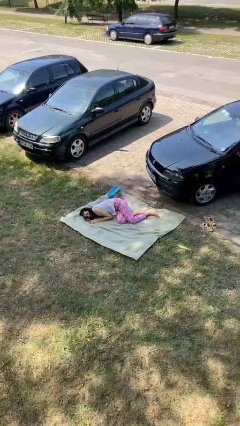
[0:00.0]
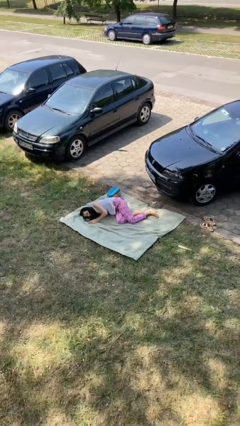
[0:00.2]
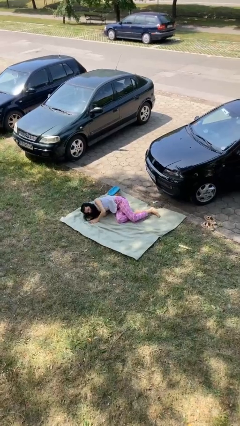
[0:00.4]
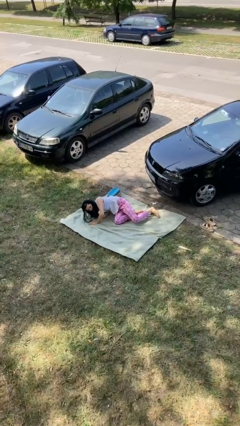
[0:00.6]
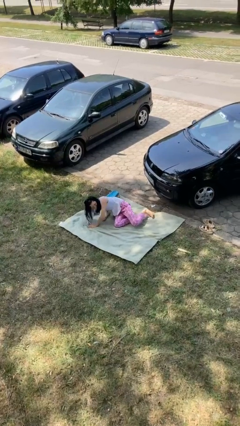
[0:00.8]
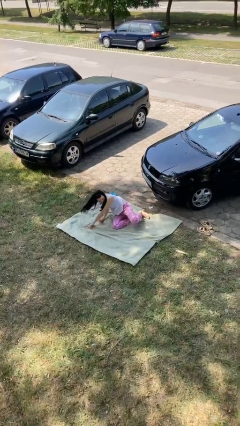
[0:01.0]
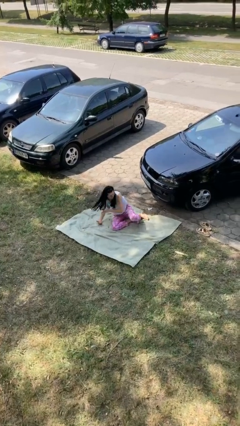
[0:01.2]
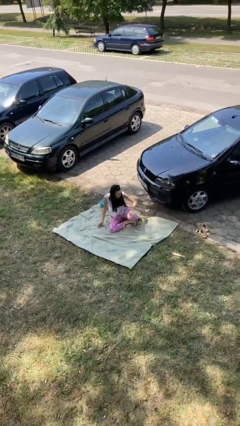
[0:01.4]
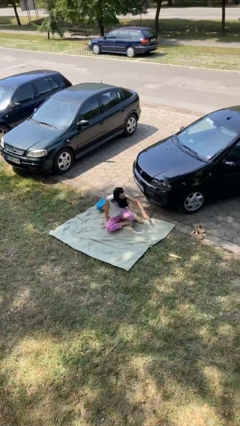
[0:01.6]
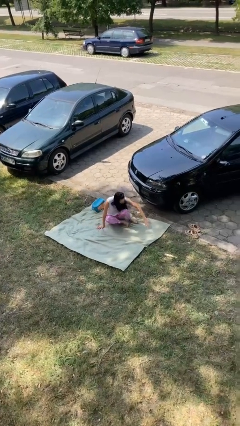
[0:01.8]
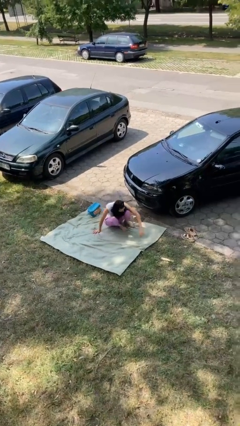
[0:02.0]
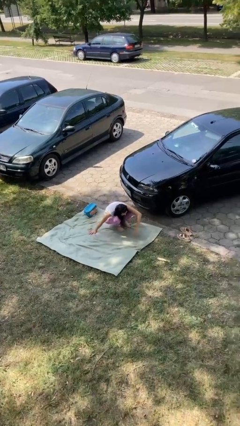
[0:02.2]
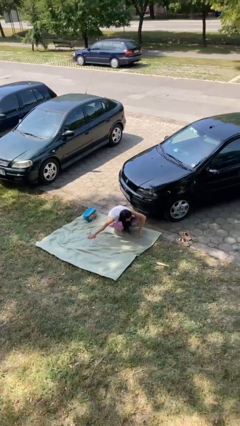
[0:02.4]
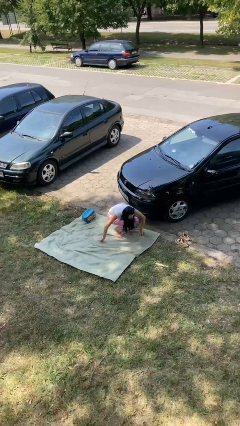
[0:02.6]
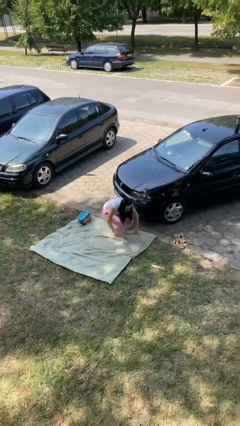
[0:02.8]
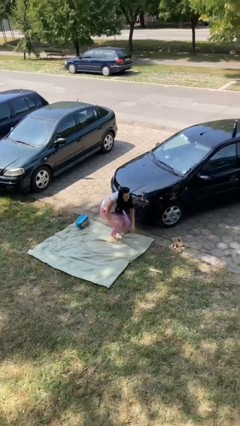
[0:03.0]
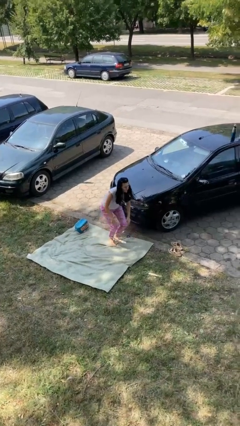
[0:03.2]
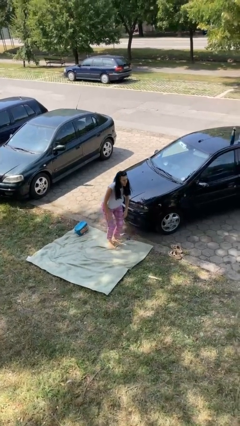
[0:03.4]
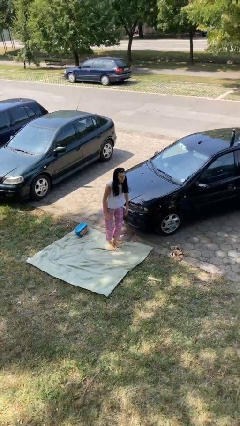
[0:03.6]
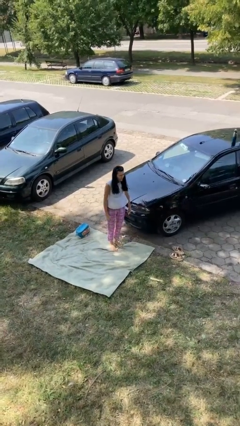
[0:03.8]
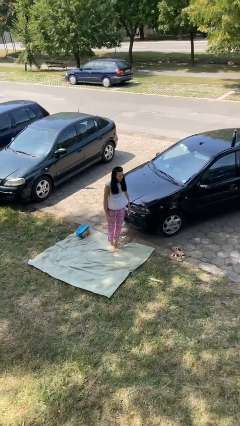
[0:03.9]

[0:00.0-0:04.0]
person stands up from floor

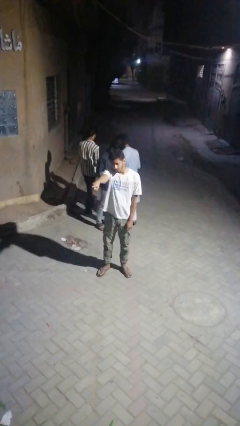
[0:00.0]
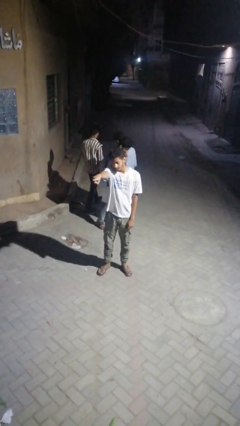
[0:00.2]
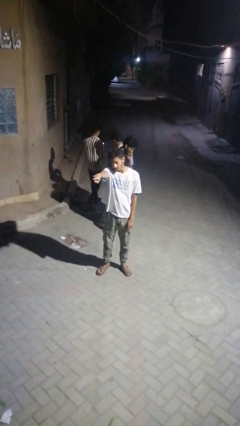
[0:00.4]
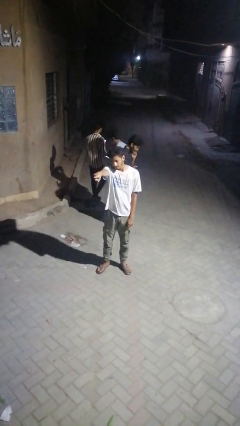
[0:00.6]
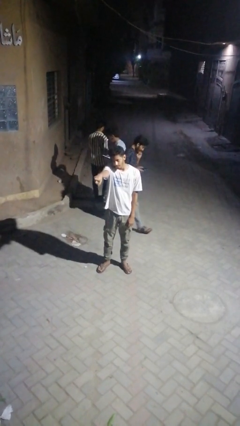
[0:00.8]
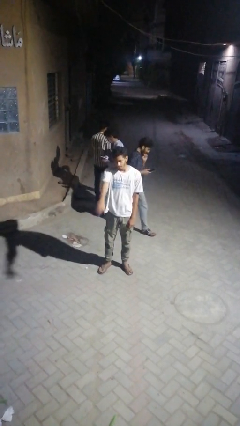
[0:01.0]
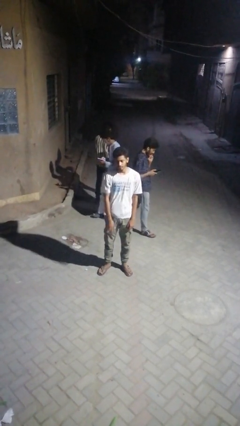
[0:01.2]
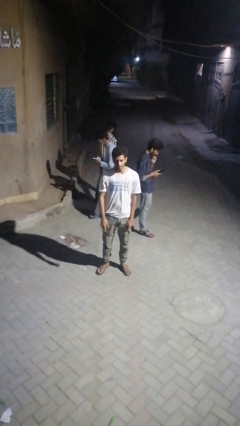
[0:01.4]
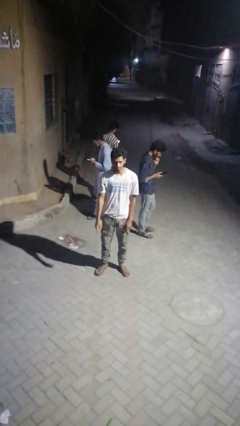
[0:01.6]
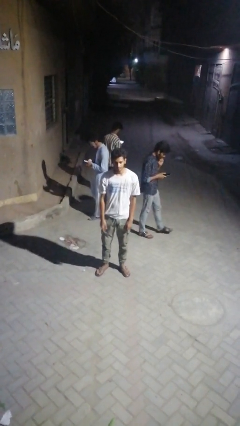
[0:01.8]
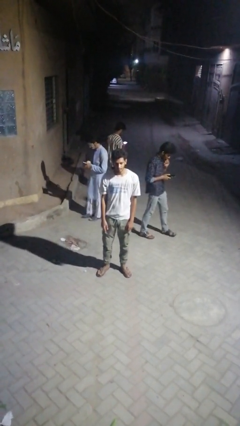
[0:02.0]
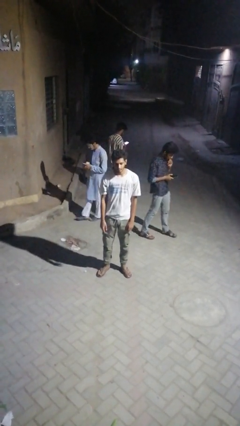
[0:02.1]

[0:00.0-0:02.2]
person points at person

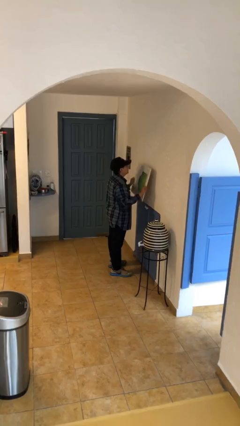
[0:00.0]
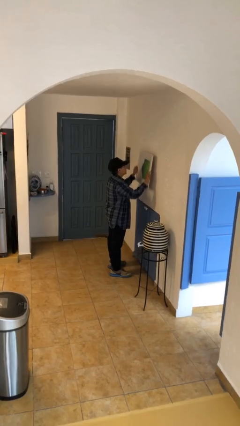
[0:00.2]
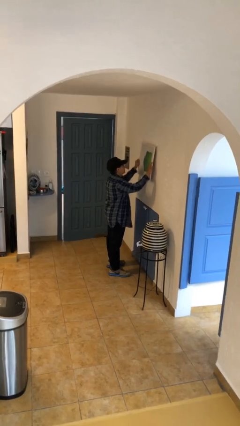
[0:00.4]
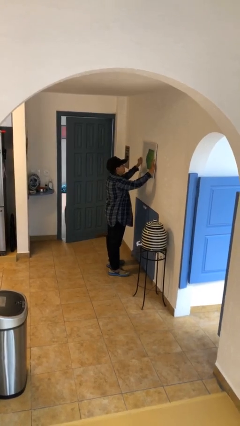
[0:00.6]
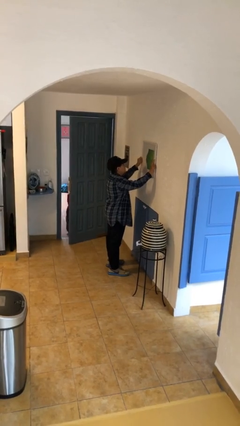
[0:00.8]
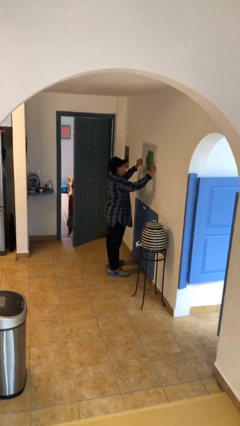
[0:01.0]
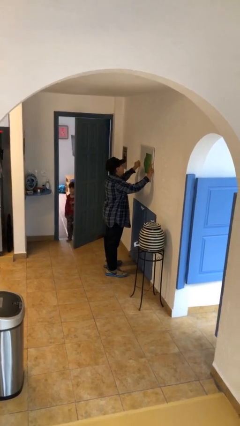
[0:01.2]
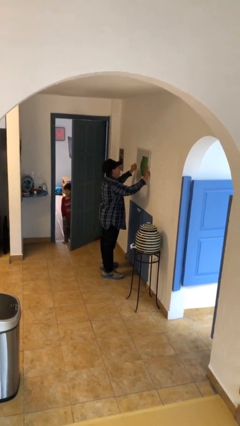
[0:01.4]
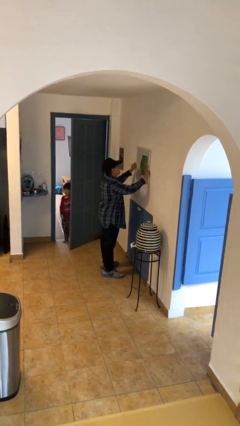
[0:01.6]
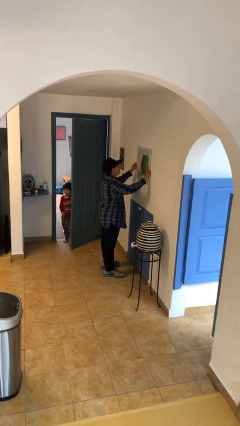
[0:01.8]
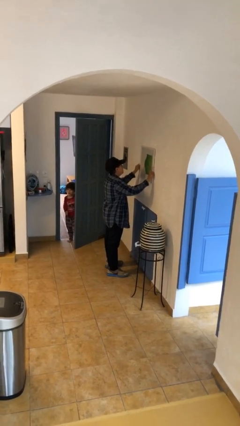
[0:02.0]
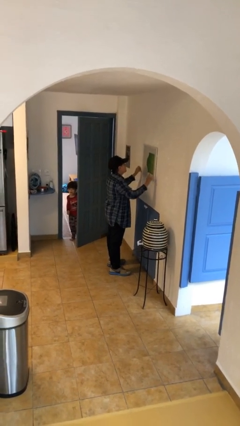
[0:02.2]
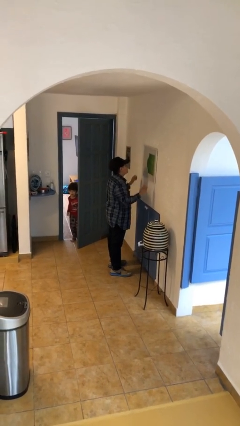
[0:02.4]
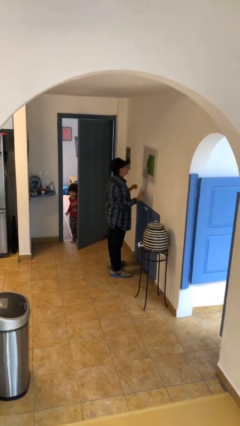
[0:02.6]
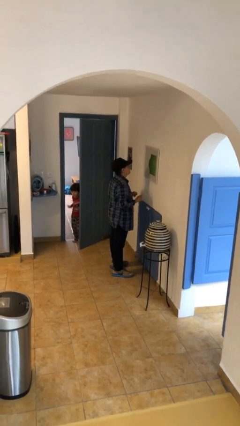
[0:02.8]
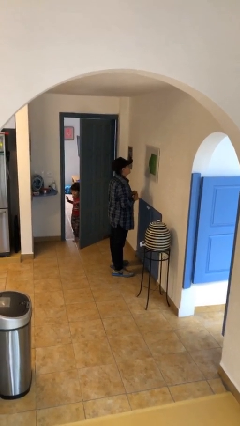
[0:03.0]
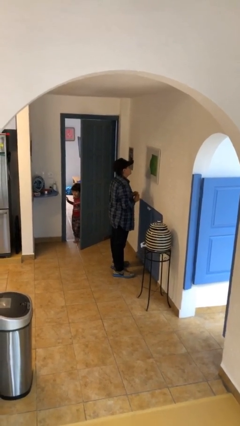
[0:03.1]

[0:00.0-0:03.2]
person puts up picture frame

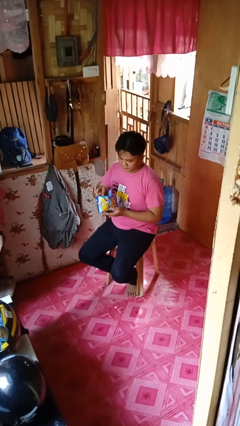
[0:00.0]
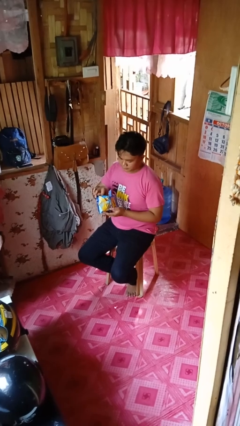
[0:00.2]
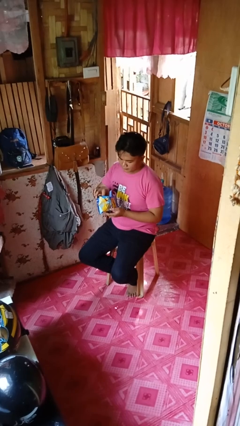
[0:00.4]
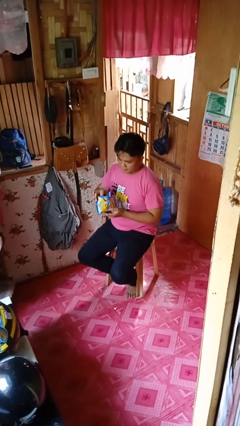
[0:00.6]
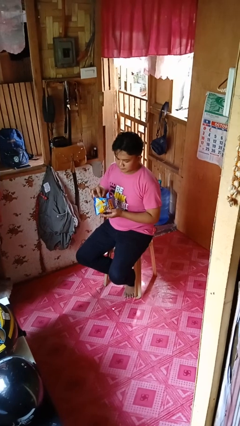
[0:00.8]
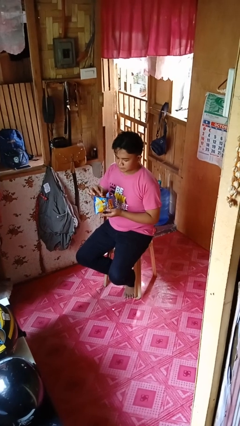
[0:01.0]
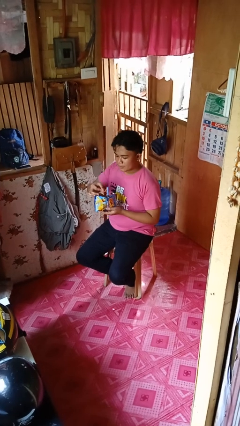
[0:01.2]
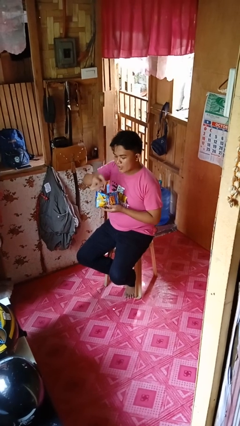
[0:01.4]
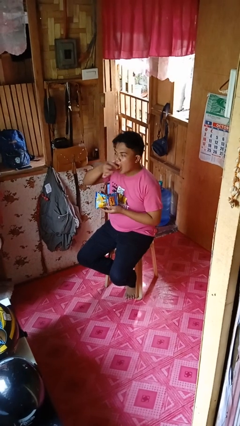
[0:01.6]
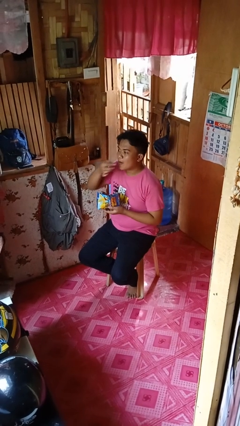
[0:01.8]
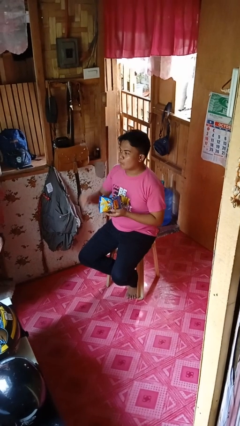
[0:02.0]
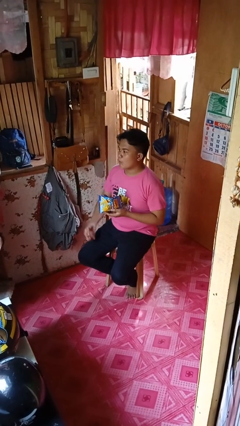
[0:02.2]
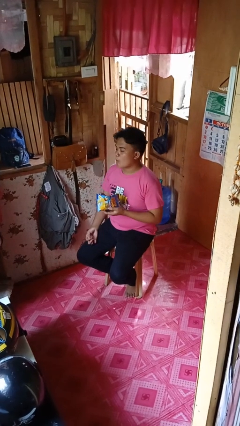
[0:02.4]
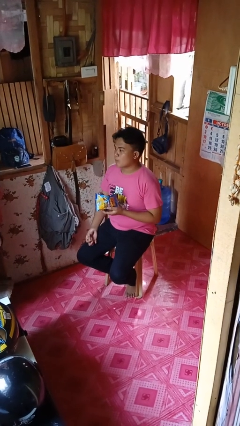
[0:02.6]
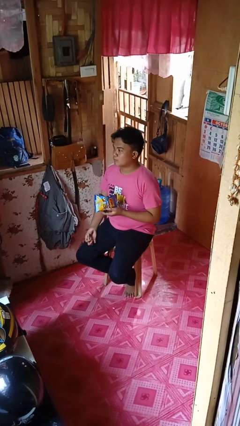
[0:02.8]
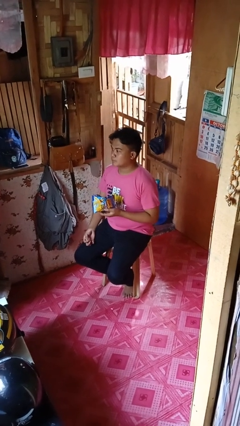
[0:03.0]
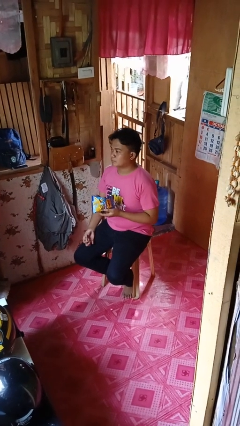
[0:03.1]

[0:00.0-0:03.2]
person eats snack from bag

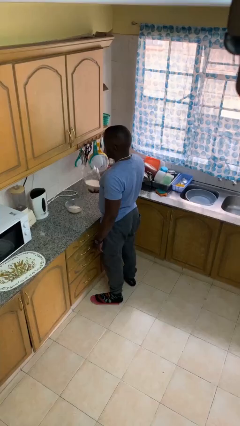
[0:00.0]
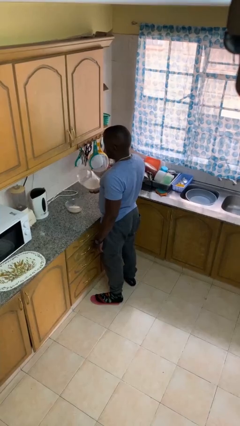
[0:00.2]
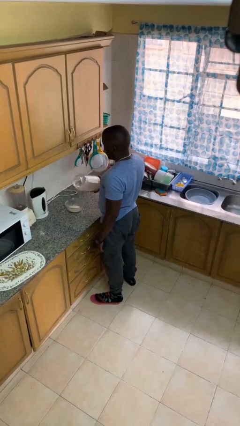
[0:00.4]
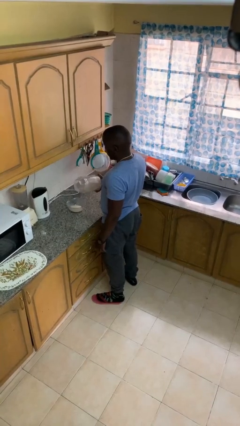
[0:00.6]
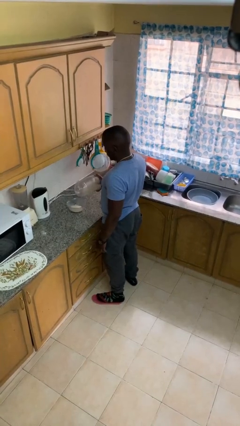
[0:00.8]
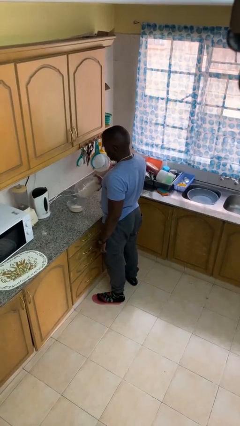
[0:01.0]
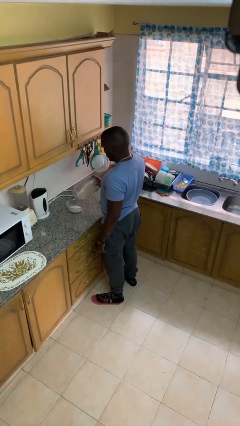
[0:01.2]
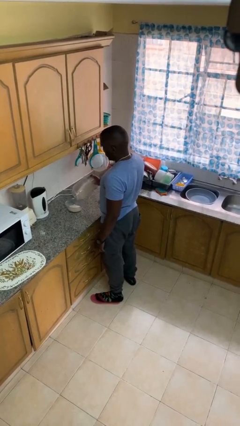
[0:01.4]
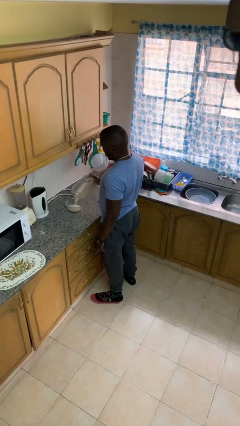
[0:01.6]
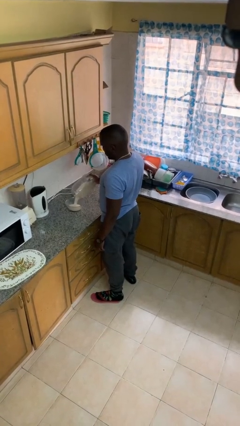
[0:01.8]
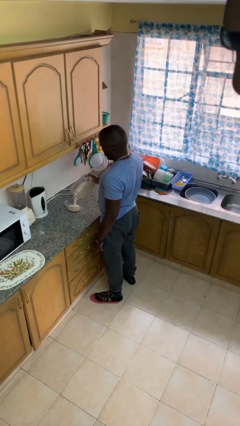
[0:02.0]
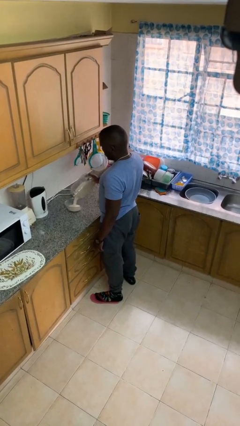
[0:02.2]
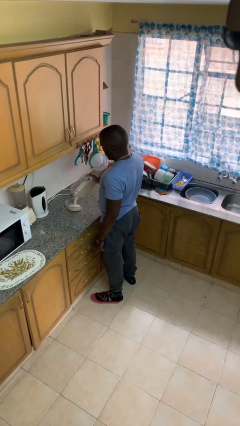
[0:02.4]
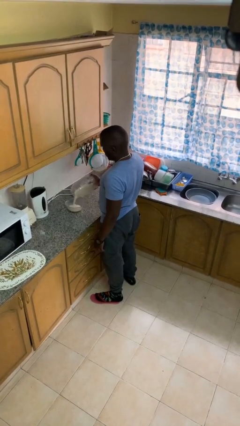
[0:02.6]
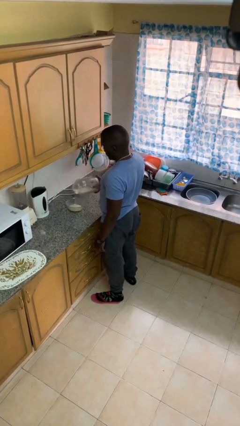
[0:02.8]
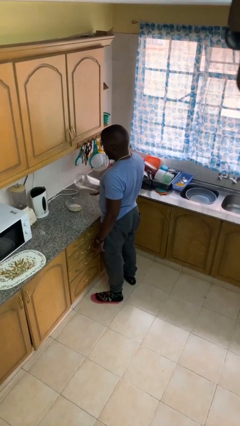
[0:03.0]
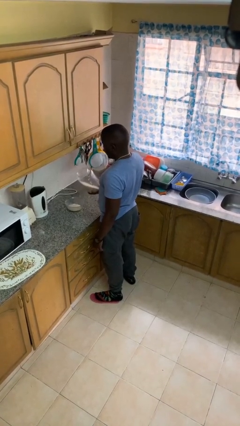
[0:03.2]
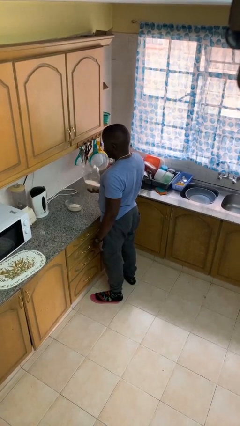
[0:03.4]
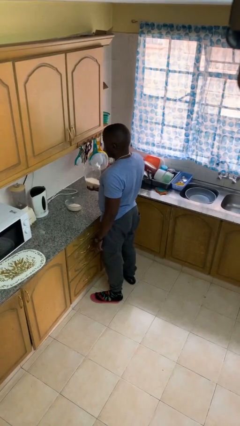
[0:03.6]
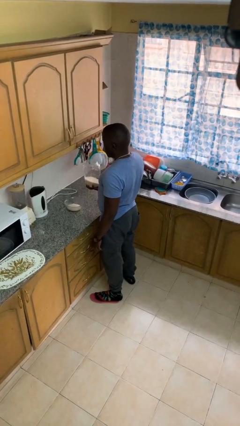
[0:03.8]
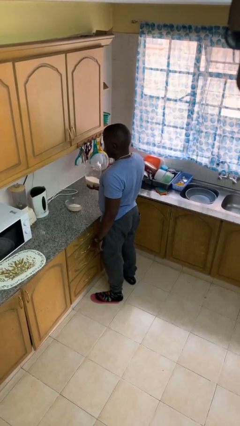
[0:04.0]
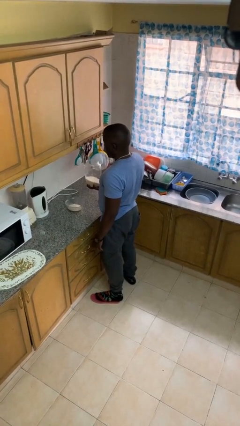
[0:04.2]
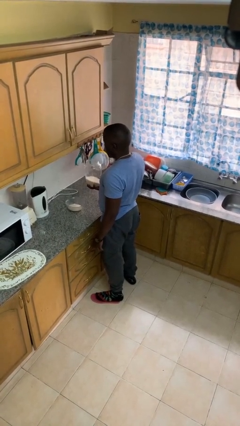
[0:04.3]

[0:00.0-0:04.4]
person pours into bowl

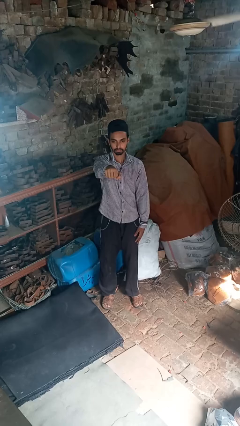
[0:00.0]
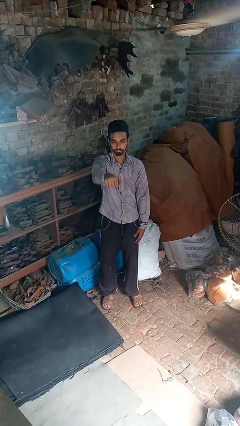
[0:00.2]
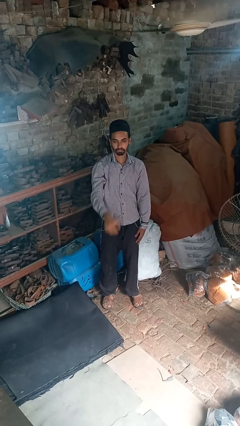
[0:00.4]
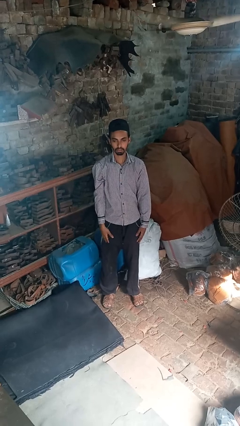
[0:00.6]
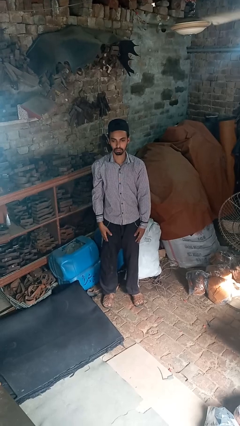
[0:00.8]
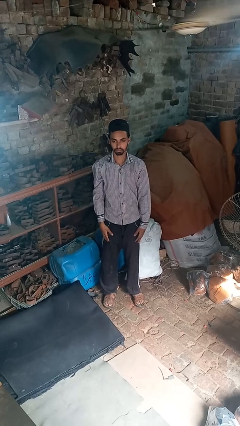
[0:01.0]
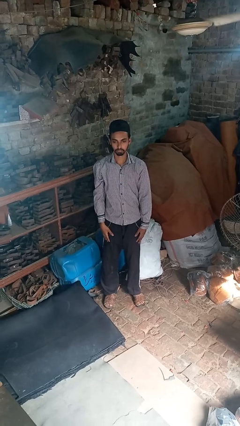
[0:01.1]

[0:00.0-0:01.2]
person punches
